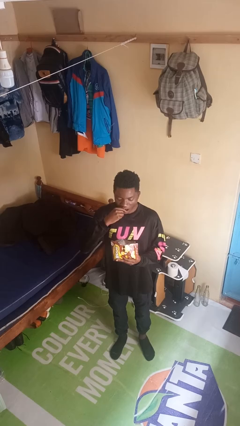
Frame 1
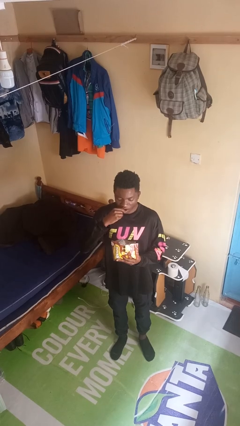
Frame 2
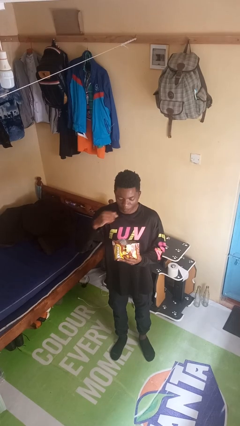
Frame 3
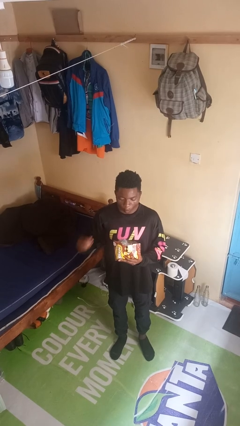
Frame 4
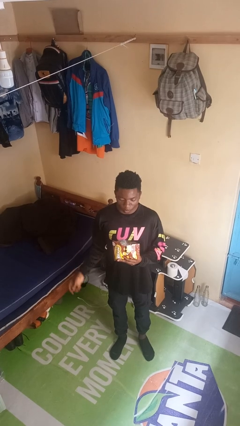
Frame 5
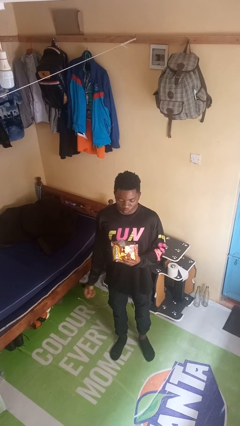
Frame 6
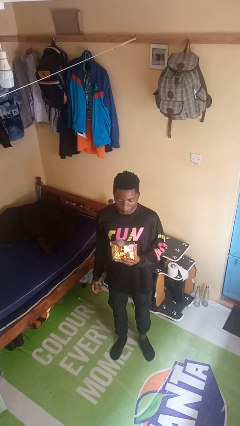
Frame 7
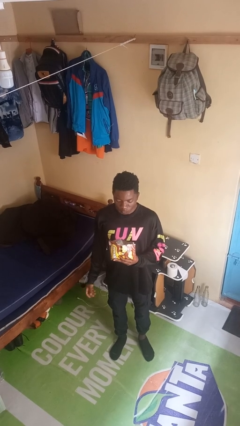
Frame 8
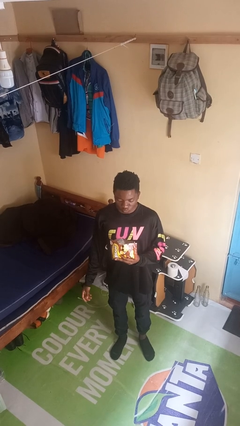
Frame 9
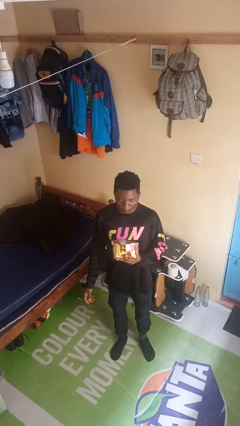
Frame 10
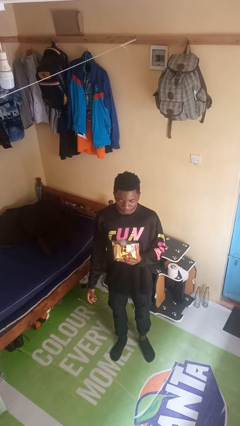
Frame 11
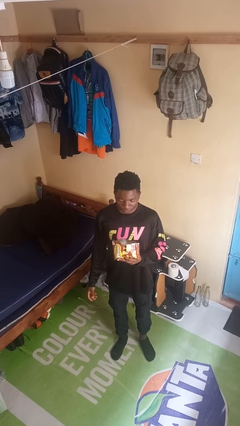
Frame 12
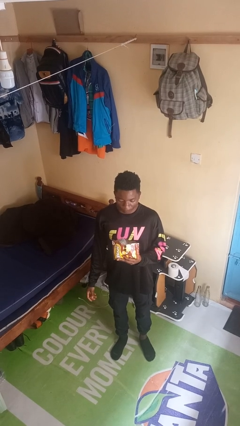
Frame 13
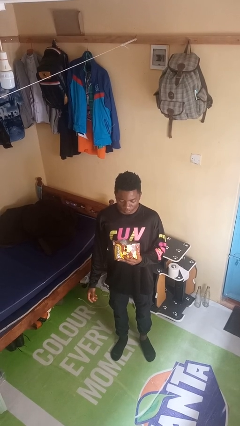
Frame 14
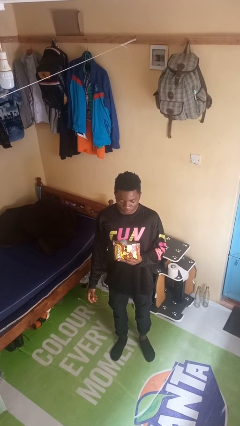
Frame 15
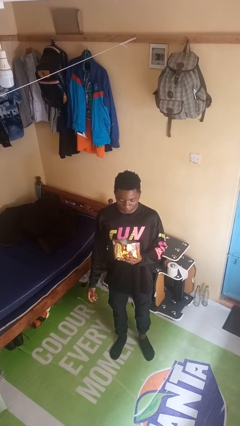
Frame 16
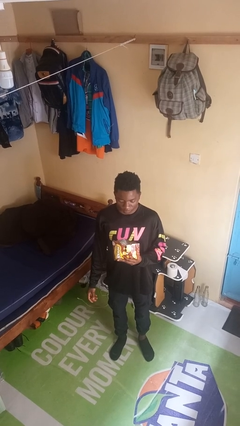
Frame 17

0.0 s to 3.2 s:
person eats snack from bag

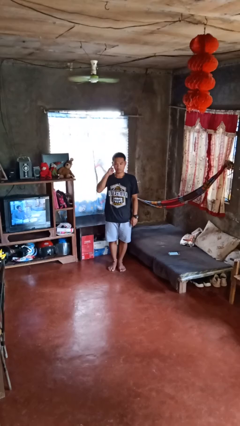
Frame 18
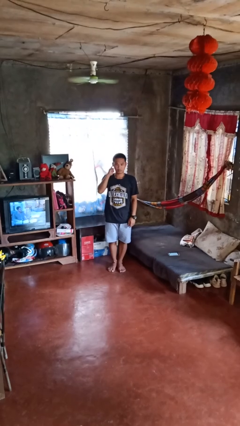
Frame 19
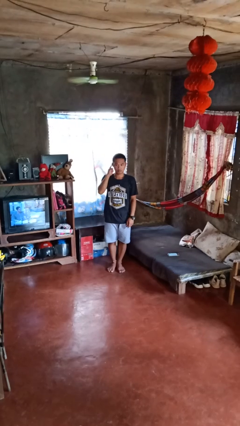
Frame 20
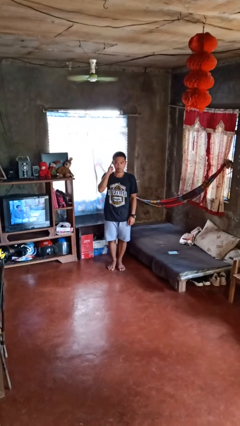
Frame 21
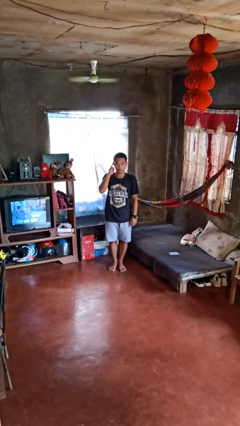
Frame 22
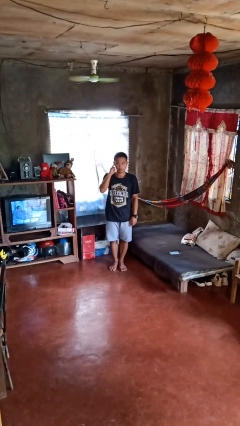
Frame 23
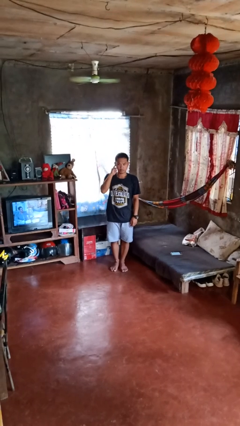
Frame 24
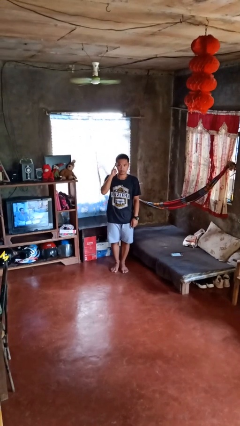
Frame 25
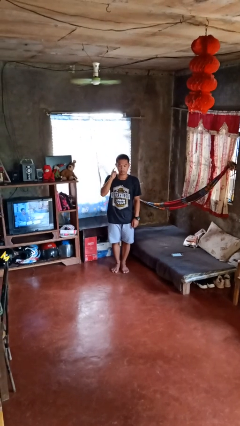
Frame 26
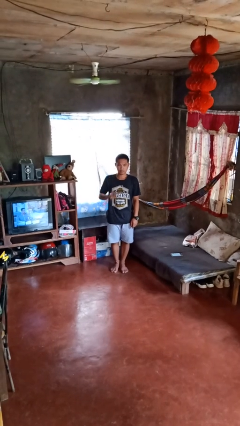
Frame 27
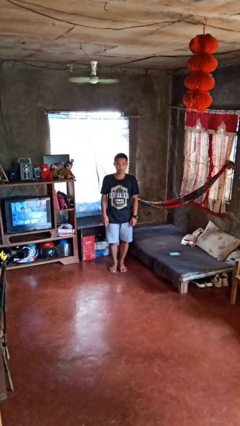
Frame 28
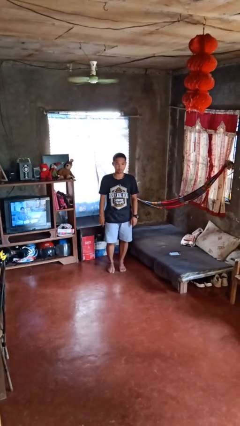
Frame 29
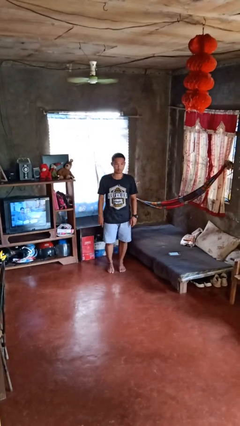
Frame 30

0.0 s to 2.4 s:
person gestures listen closely

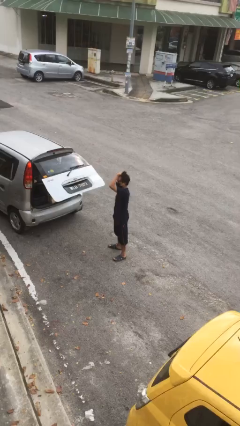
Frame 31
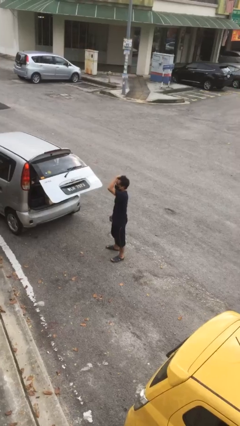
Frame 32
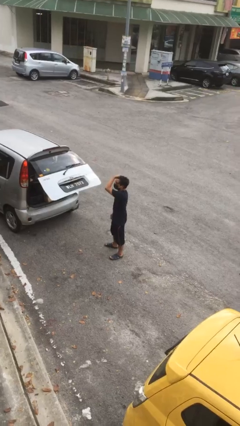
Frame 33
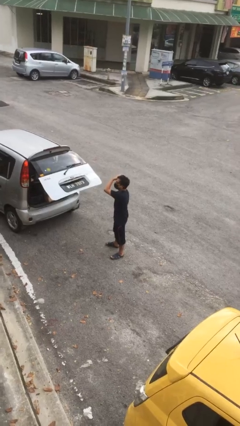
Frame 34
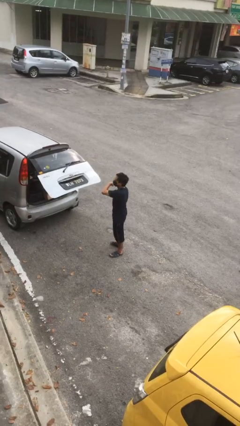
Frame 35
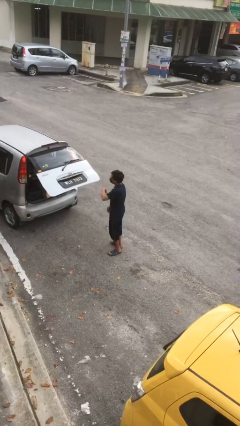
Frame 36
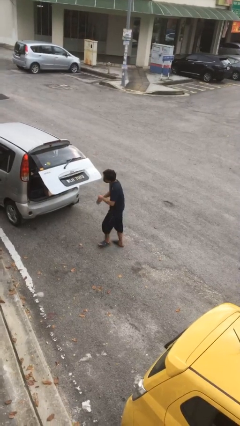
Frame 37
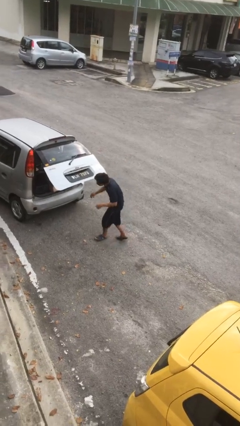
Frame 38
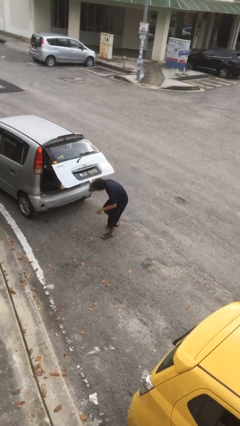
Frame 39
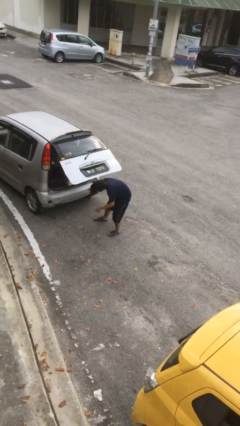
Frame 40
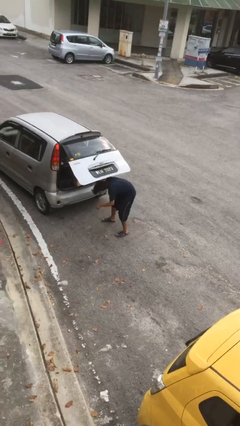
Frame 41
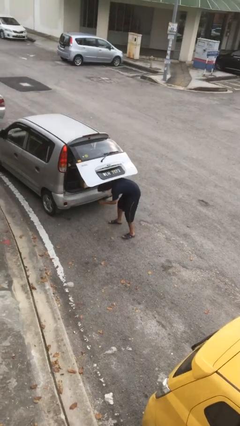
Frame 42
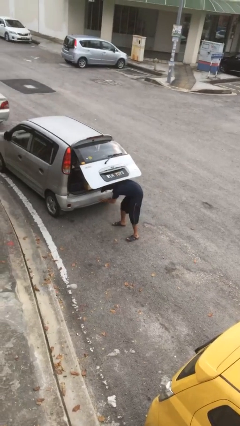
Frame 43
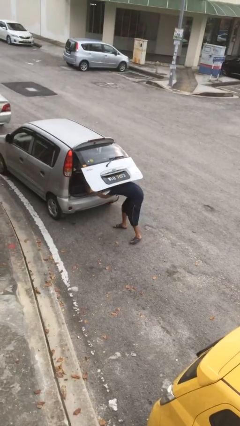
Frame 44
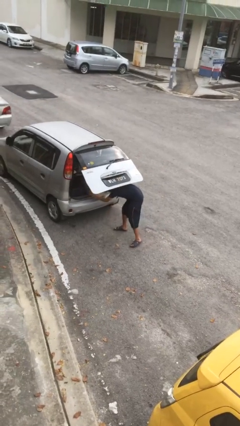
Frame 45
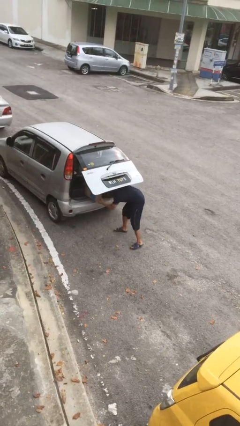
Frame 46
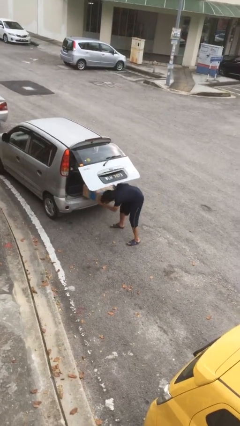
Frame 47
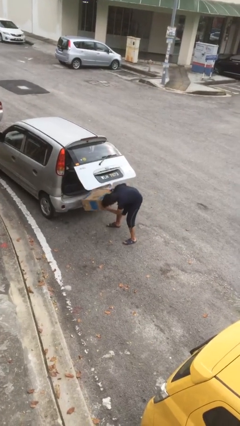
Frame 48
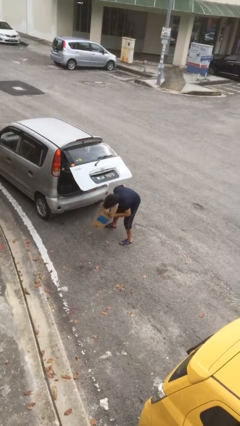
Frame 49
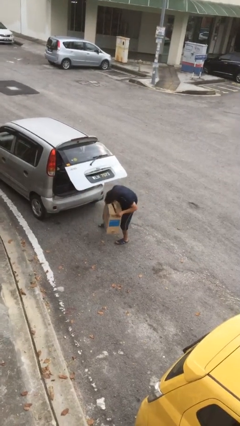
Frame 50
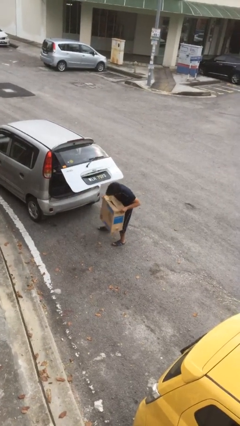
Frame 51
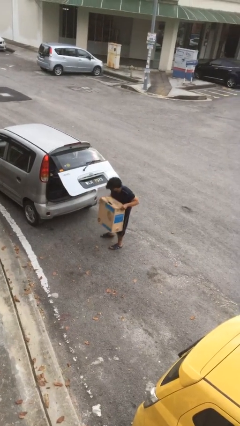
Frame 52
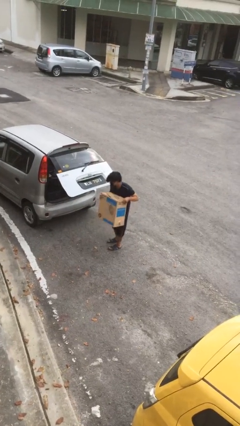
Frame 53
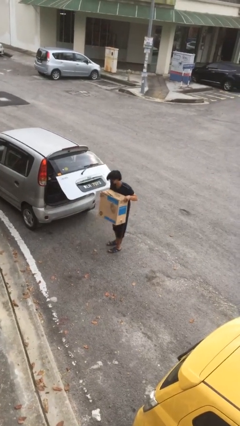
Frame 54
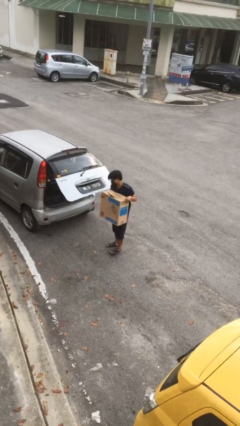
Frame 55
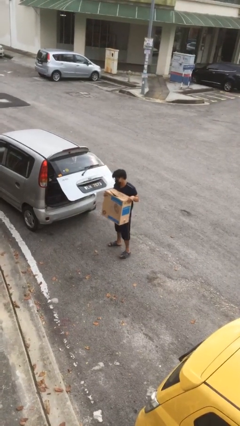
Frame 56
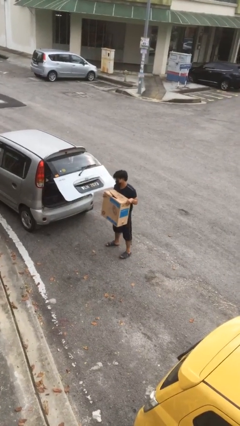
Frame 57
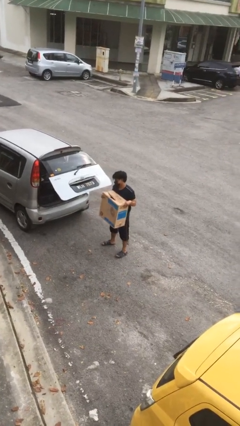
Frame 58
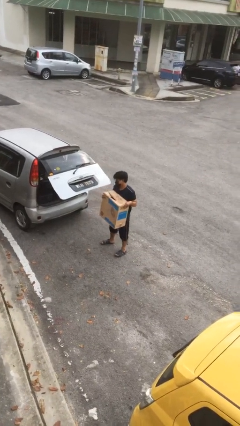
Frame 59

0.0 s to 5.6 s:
person unloads car

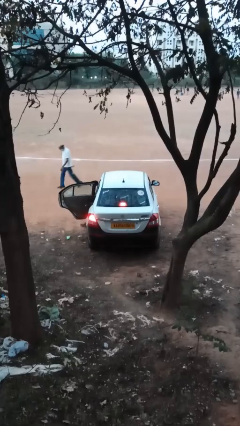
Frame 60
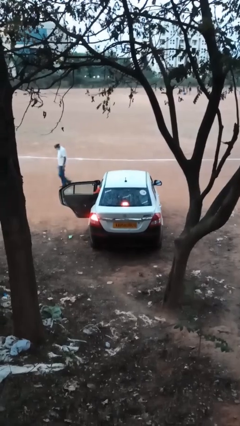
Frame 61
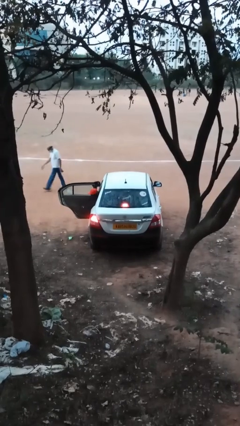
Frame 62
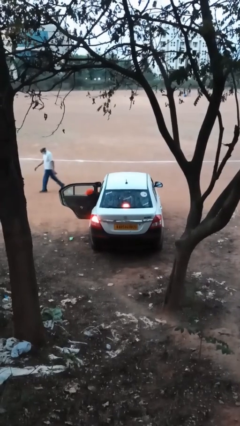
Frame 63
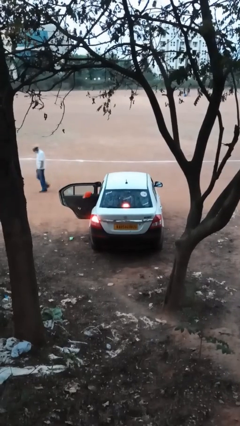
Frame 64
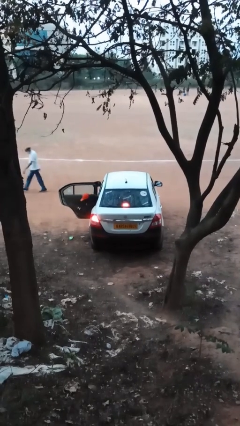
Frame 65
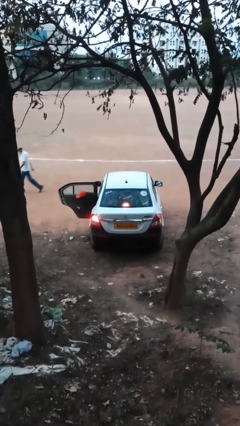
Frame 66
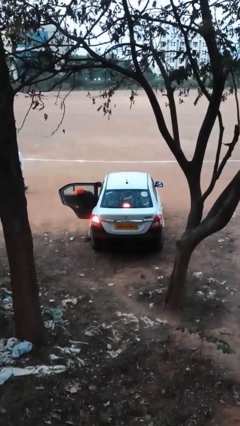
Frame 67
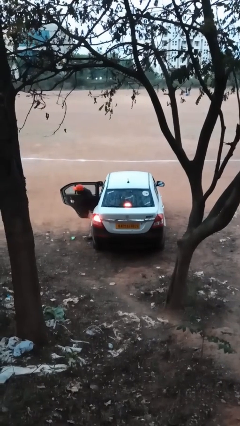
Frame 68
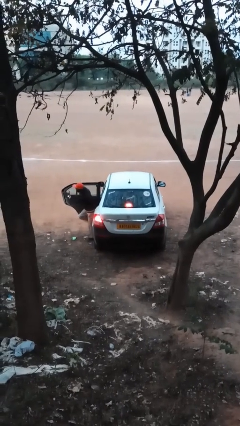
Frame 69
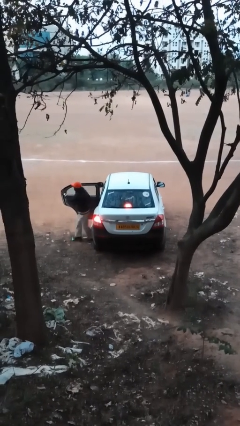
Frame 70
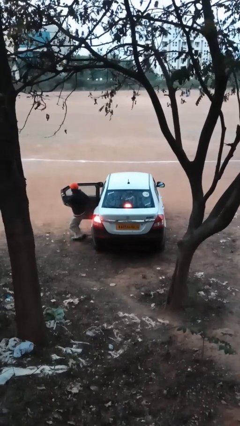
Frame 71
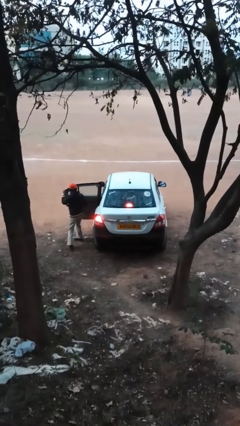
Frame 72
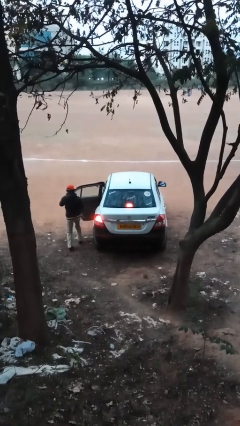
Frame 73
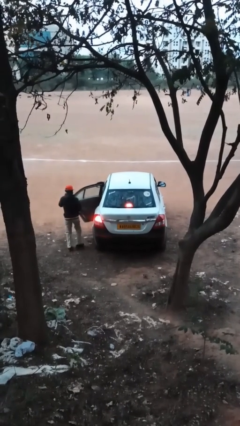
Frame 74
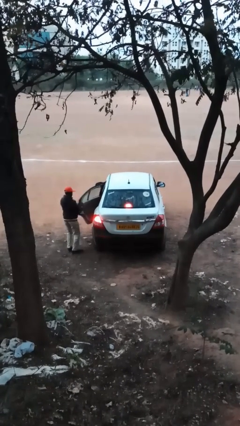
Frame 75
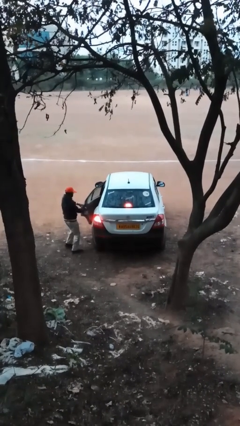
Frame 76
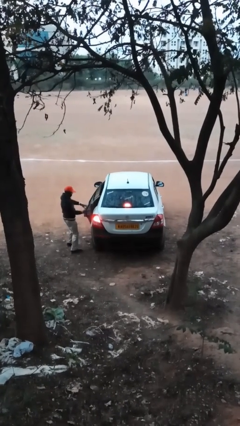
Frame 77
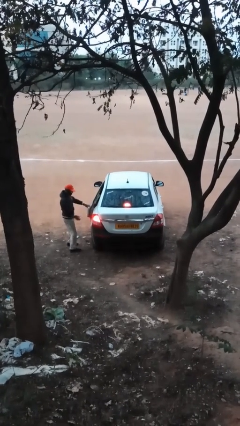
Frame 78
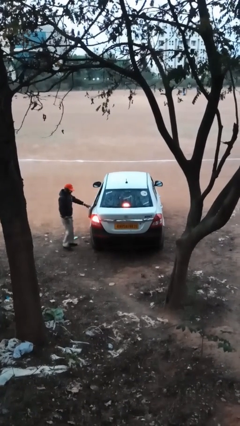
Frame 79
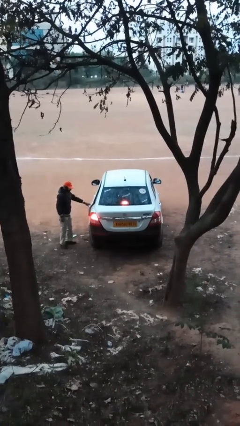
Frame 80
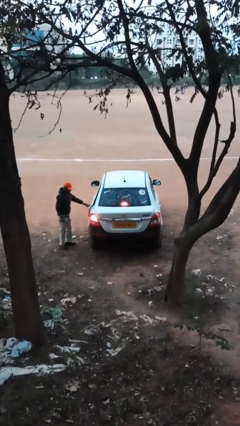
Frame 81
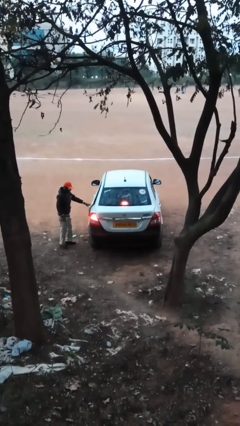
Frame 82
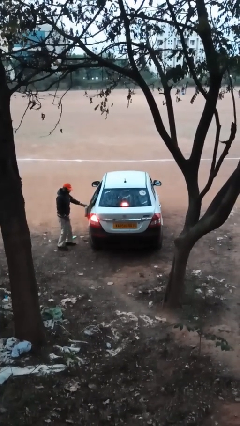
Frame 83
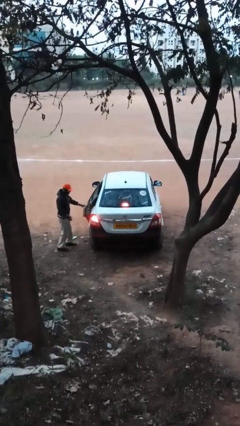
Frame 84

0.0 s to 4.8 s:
car drops off person

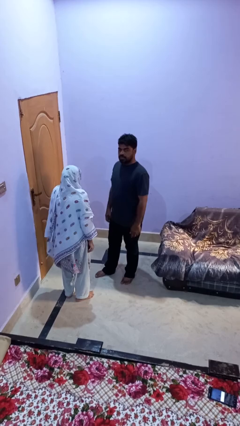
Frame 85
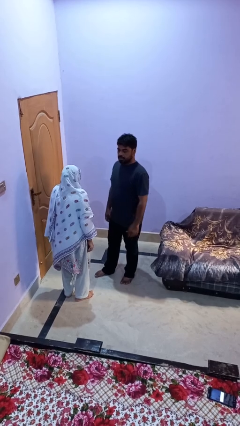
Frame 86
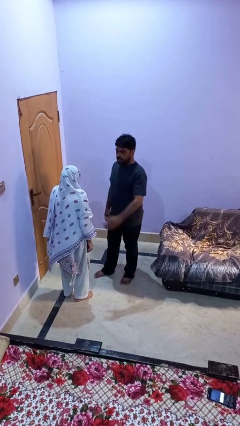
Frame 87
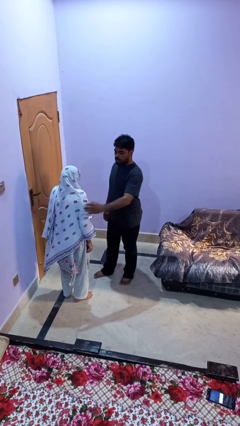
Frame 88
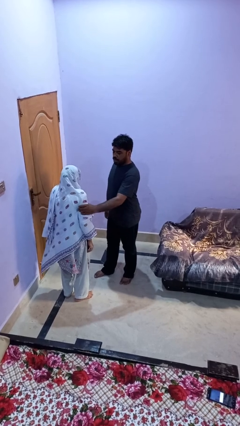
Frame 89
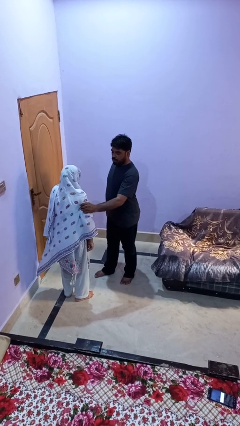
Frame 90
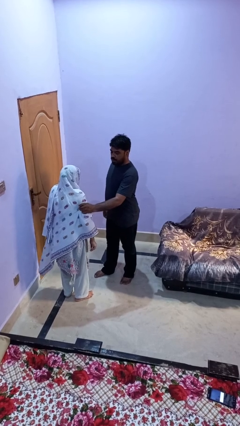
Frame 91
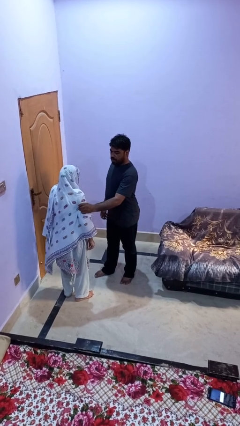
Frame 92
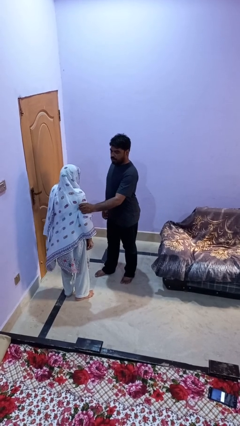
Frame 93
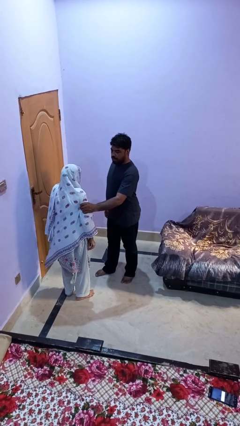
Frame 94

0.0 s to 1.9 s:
person grabs person by bicep
